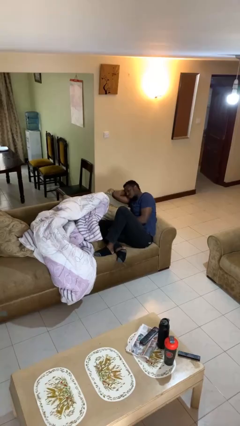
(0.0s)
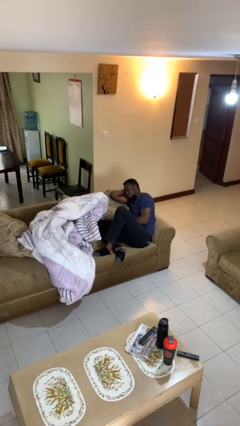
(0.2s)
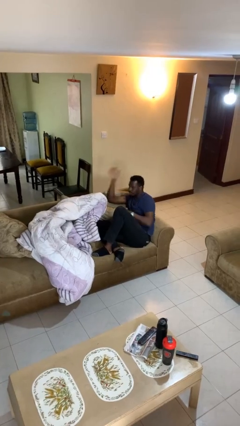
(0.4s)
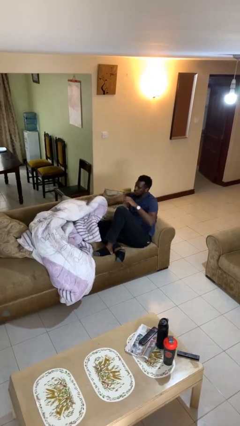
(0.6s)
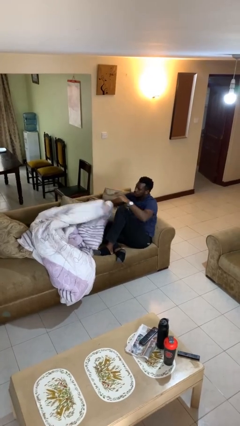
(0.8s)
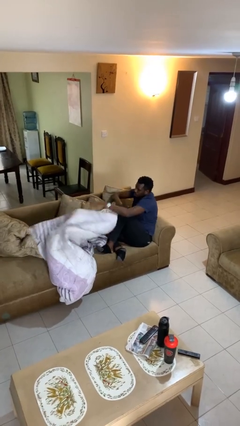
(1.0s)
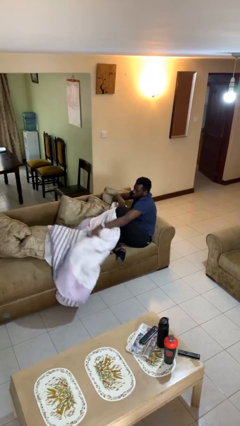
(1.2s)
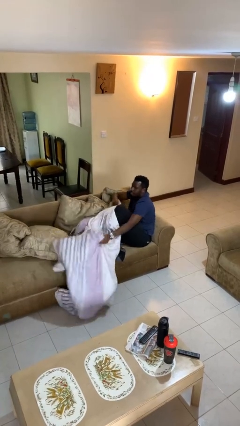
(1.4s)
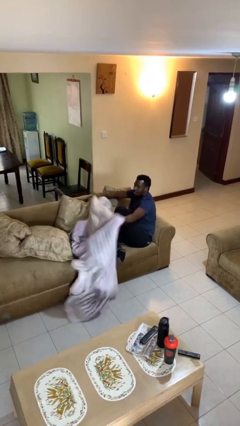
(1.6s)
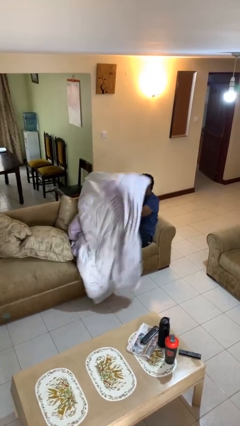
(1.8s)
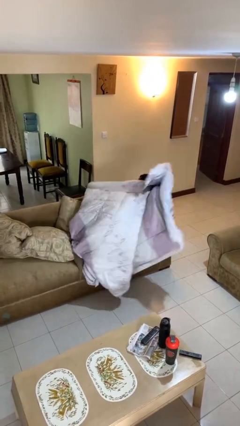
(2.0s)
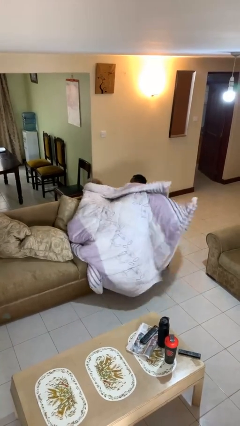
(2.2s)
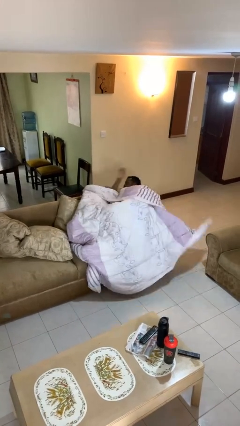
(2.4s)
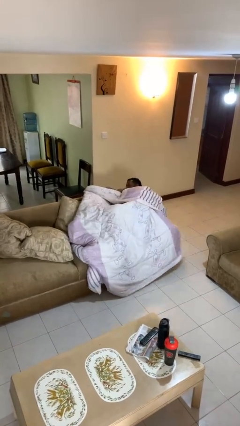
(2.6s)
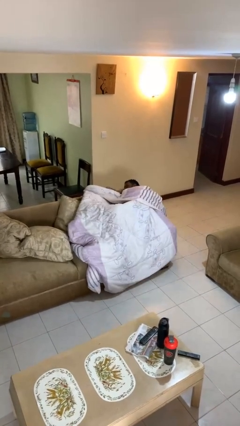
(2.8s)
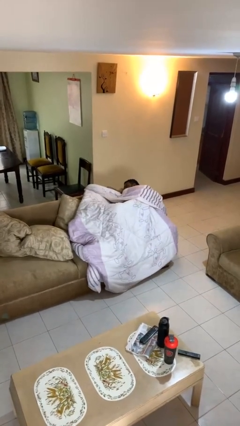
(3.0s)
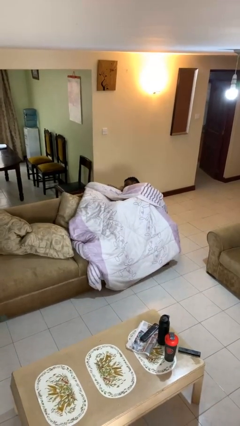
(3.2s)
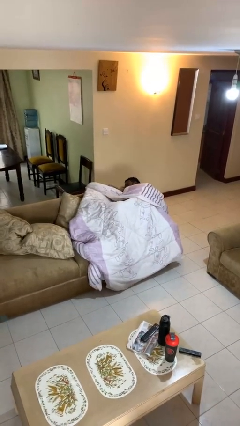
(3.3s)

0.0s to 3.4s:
person covers with blanket

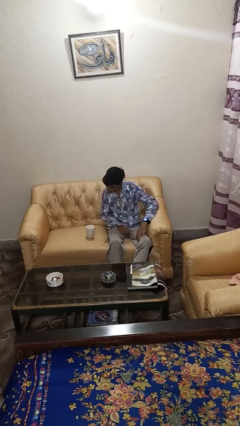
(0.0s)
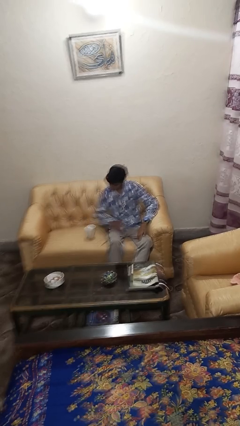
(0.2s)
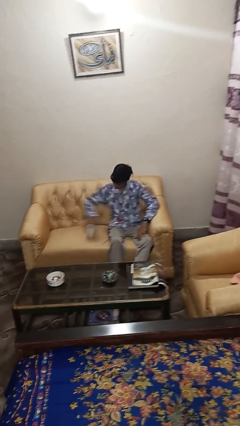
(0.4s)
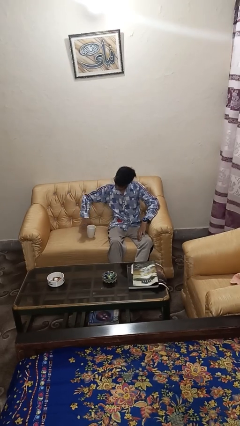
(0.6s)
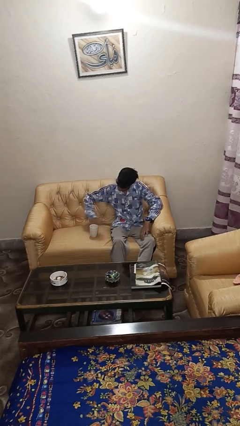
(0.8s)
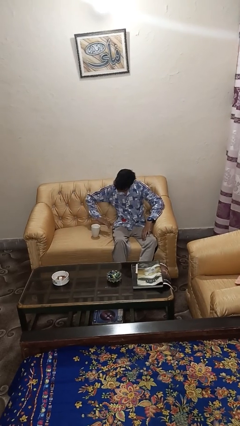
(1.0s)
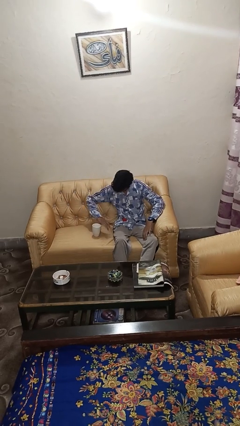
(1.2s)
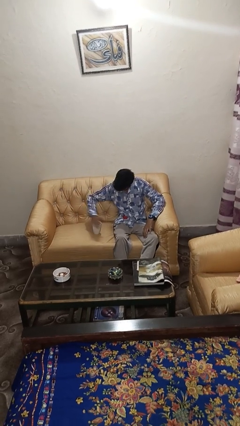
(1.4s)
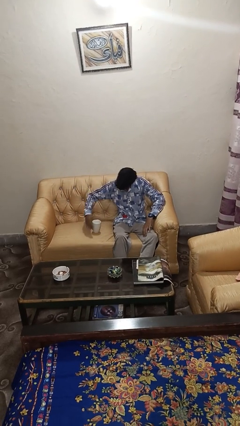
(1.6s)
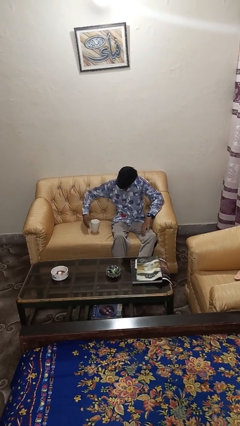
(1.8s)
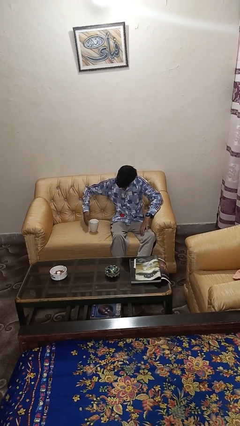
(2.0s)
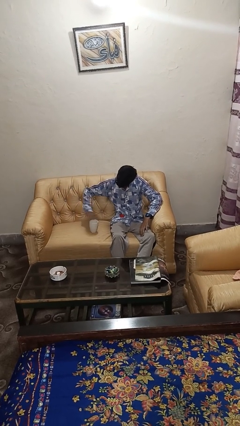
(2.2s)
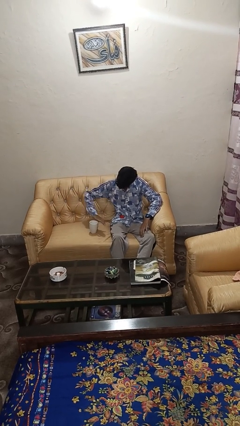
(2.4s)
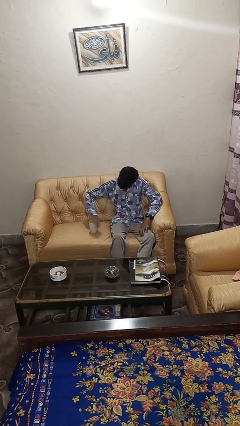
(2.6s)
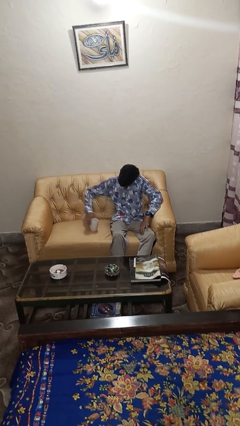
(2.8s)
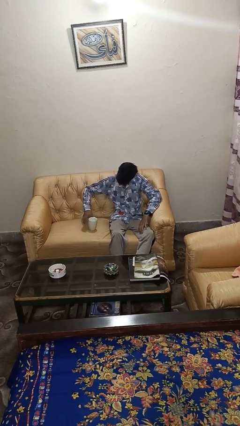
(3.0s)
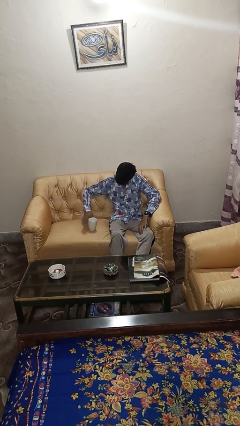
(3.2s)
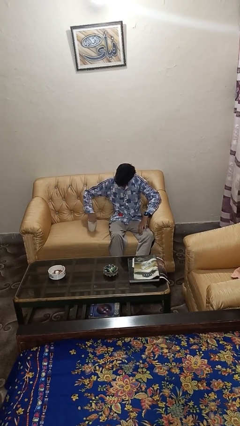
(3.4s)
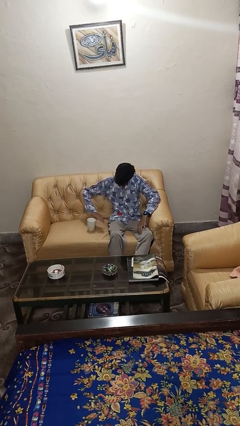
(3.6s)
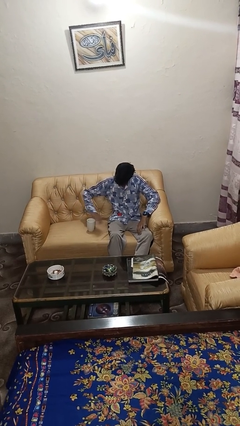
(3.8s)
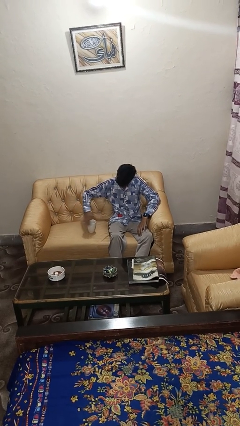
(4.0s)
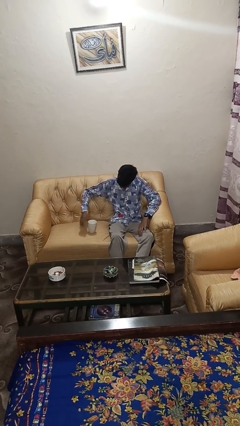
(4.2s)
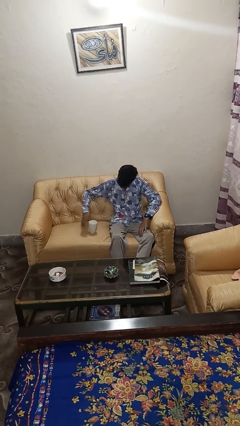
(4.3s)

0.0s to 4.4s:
person waves hand over object

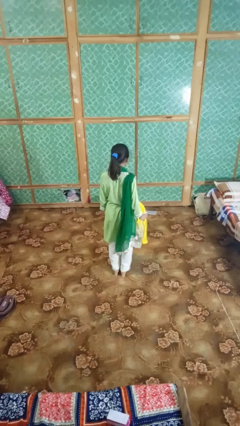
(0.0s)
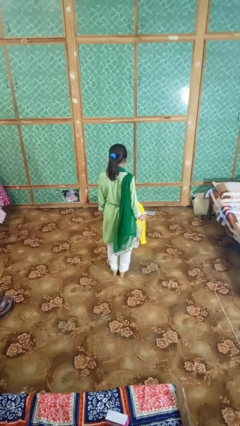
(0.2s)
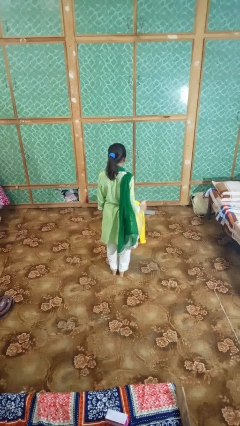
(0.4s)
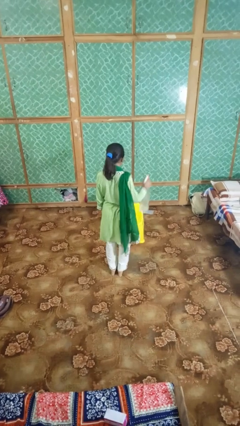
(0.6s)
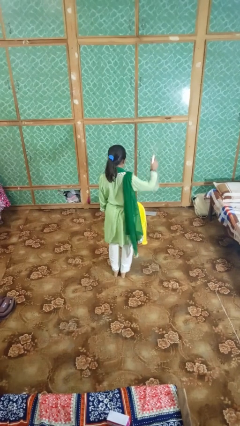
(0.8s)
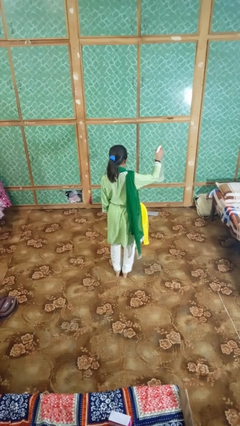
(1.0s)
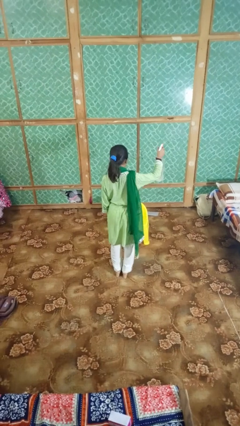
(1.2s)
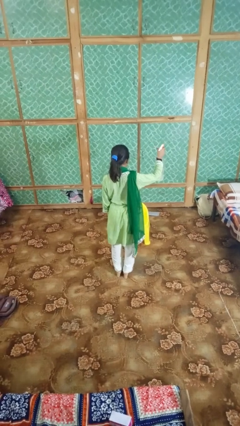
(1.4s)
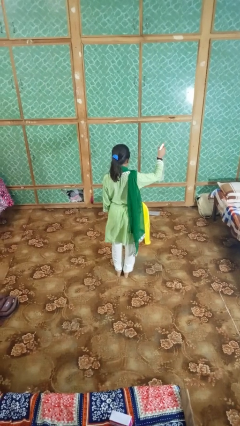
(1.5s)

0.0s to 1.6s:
person sprays from bottle

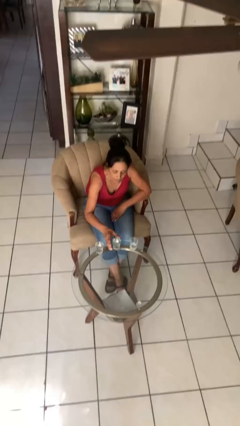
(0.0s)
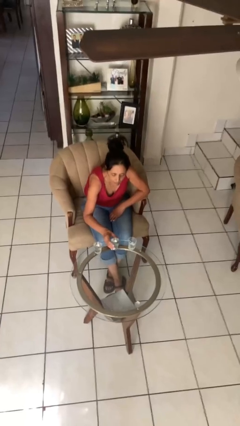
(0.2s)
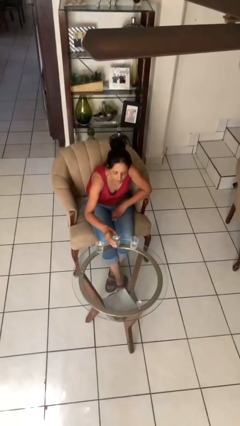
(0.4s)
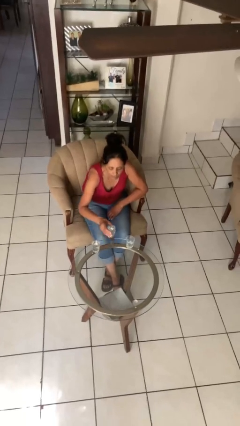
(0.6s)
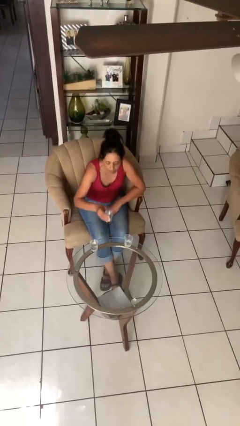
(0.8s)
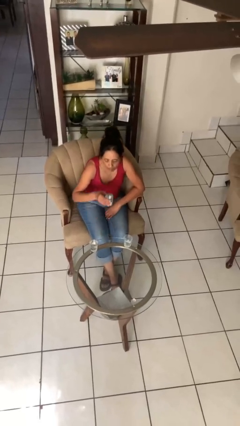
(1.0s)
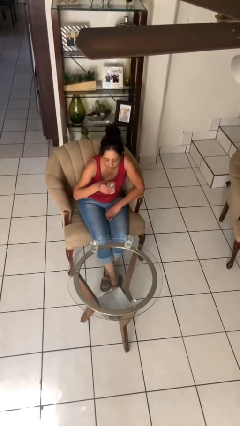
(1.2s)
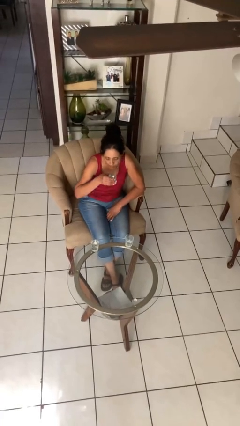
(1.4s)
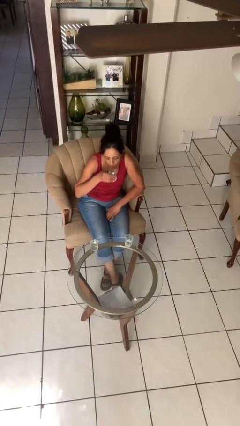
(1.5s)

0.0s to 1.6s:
person picks up object from table

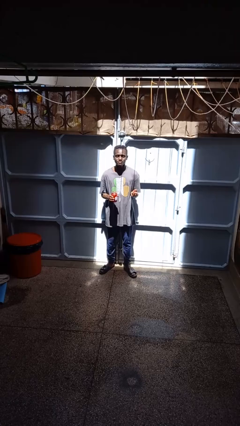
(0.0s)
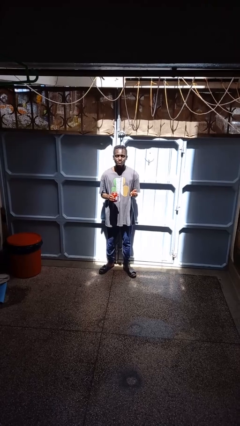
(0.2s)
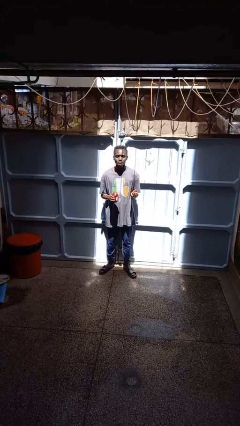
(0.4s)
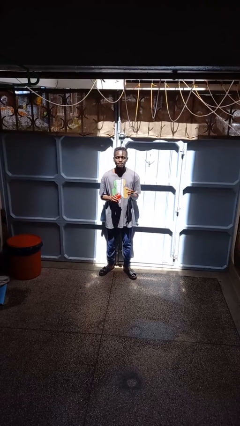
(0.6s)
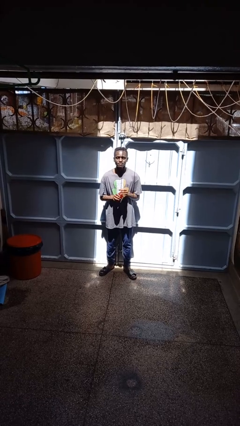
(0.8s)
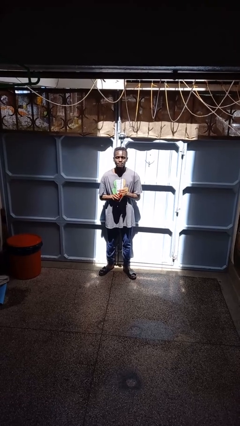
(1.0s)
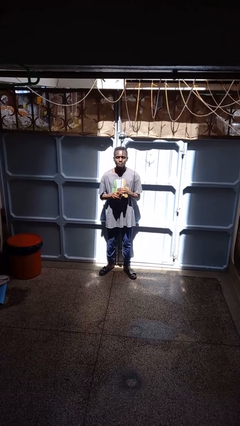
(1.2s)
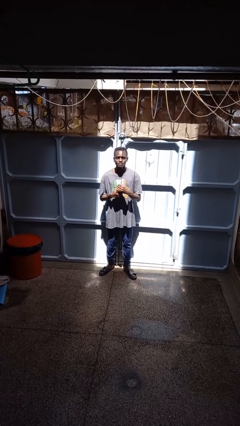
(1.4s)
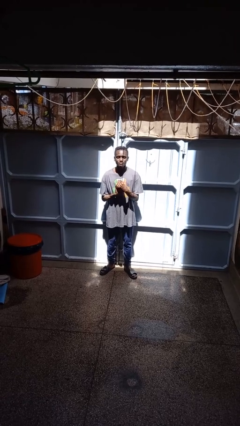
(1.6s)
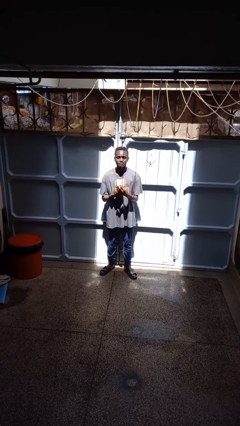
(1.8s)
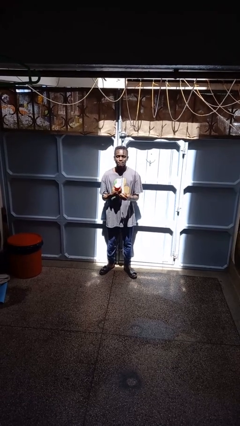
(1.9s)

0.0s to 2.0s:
person closes jar

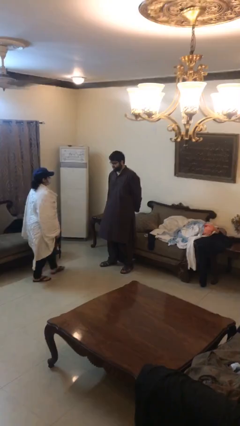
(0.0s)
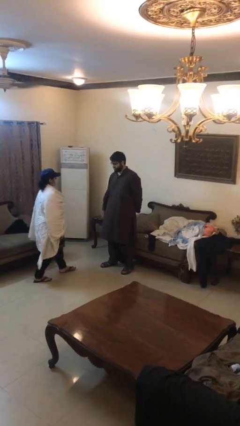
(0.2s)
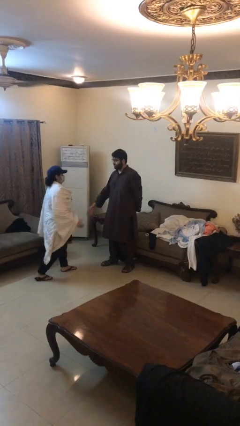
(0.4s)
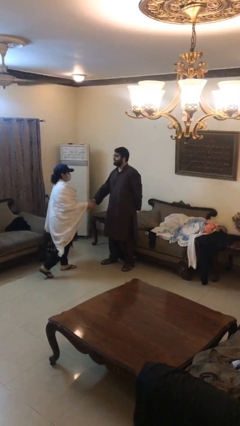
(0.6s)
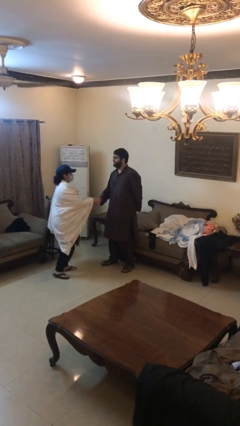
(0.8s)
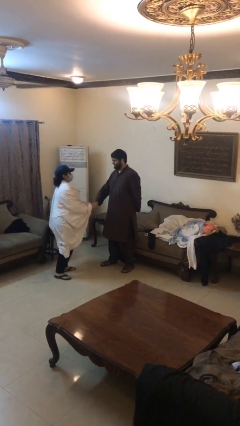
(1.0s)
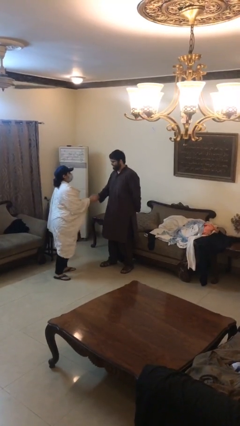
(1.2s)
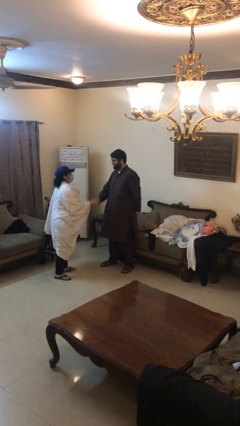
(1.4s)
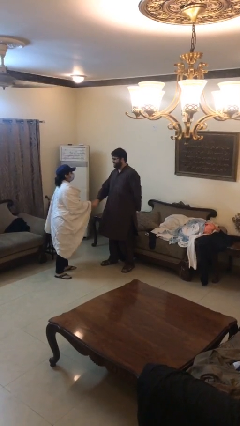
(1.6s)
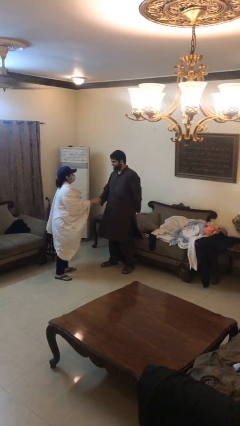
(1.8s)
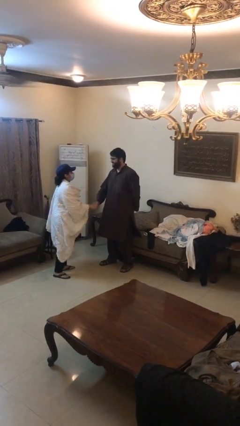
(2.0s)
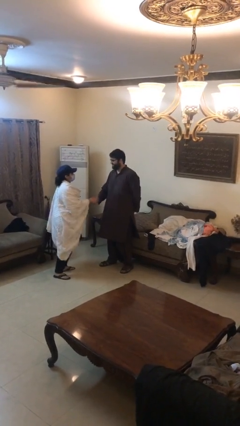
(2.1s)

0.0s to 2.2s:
person shakes hand

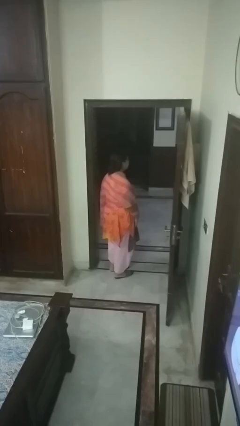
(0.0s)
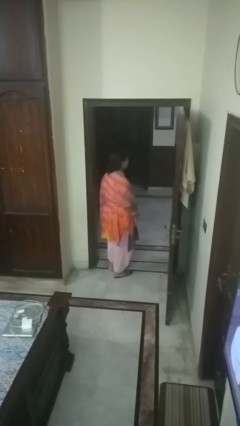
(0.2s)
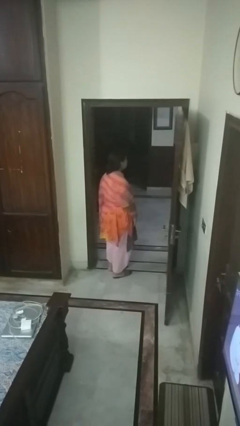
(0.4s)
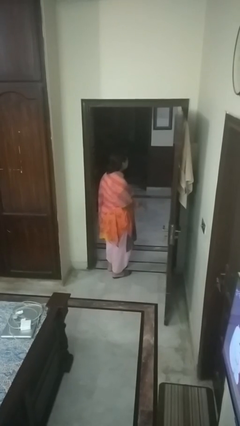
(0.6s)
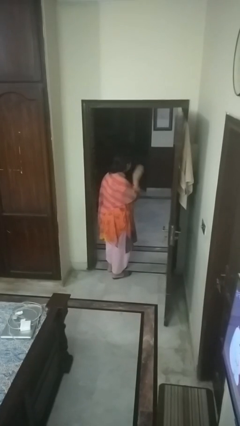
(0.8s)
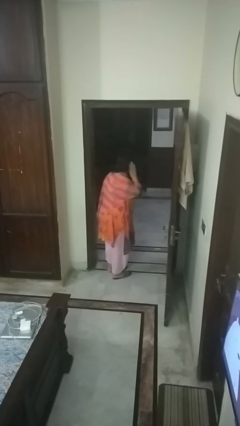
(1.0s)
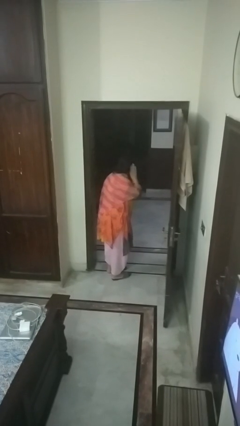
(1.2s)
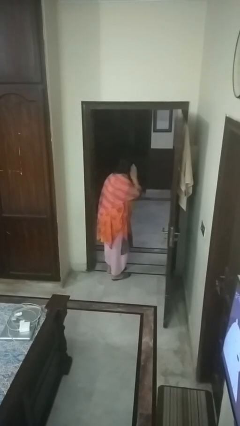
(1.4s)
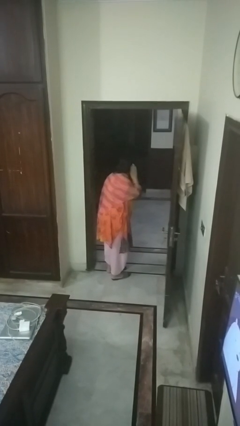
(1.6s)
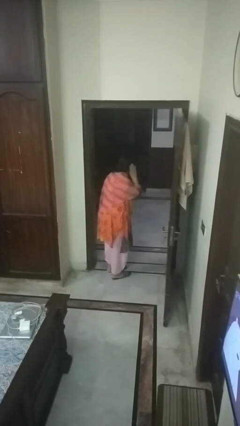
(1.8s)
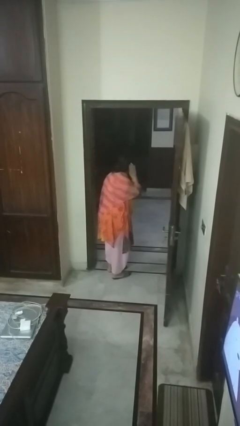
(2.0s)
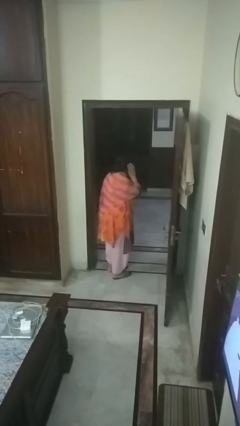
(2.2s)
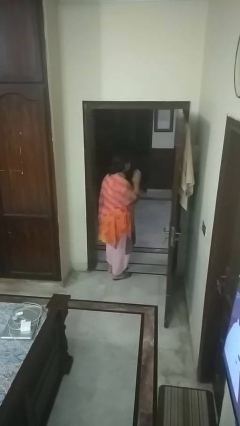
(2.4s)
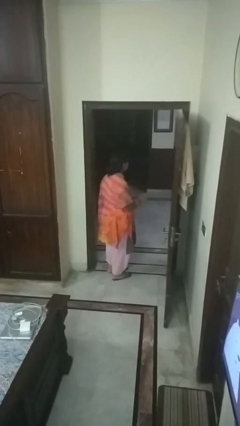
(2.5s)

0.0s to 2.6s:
person gestures listen closely
